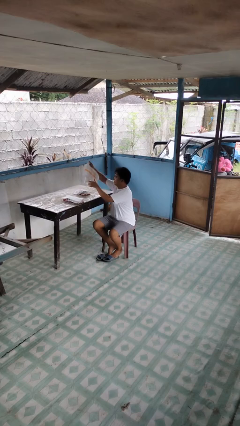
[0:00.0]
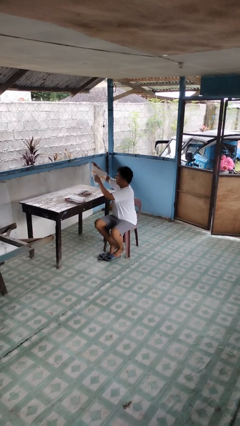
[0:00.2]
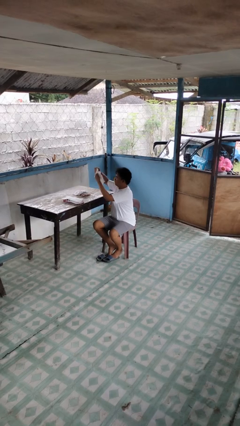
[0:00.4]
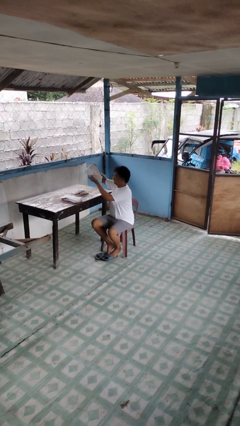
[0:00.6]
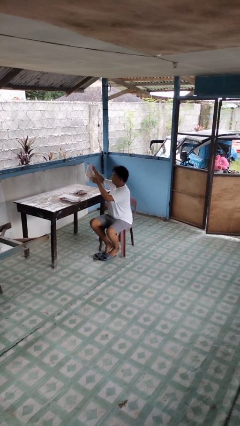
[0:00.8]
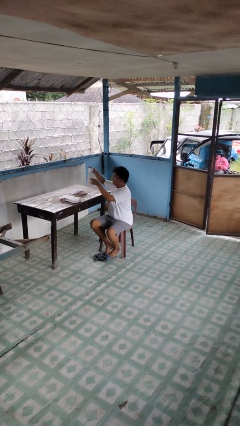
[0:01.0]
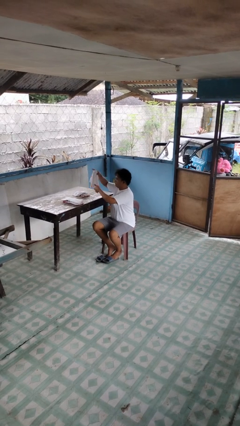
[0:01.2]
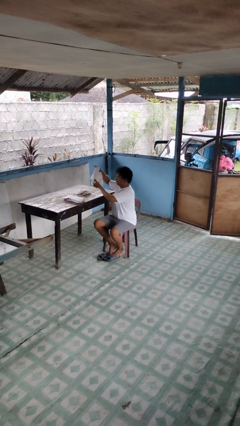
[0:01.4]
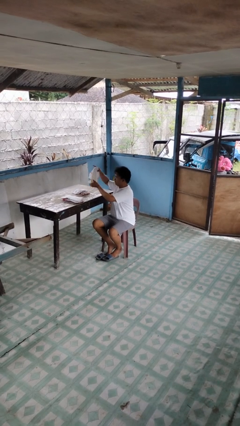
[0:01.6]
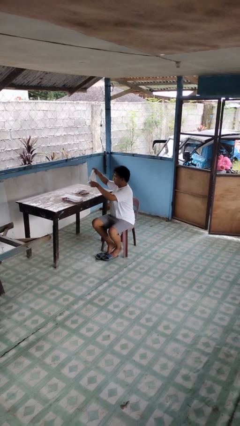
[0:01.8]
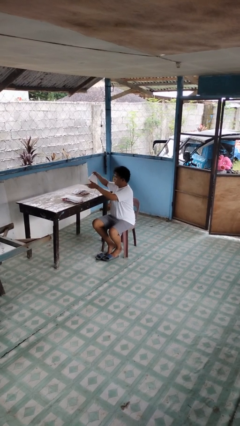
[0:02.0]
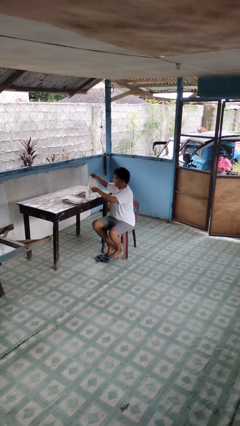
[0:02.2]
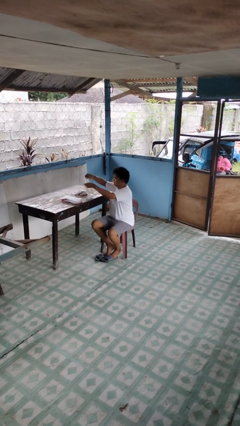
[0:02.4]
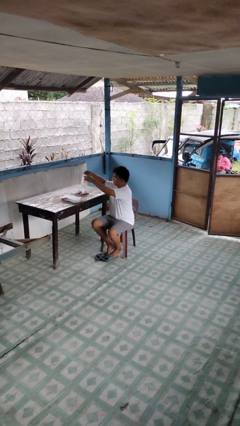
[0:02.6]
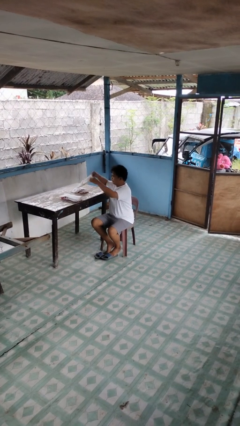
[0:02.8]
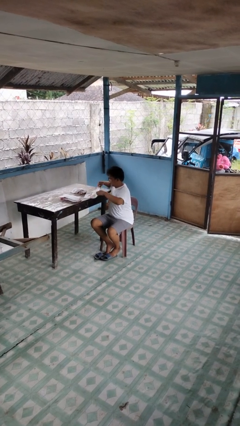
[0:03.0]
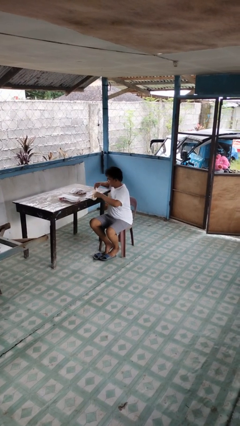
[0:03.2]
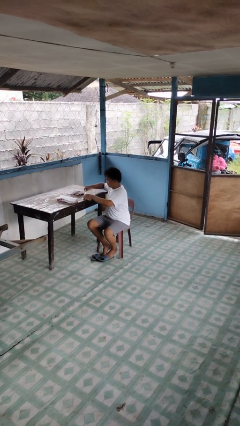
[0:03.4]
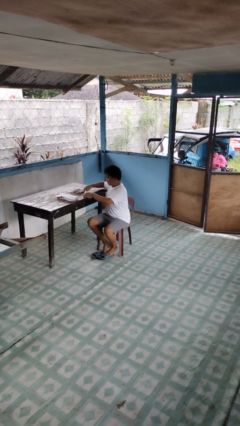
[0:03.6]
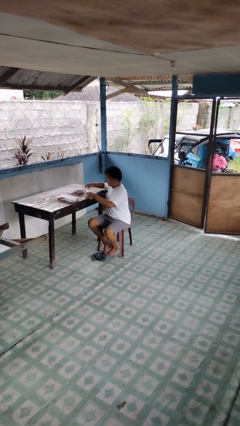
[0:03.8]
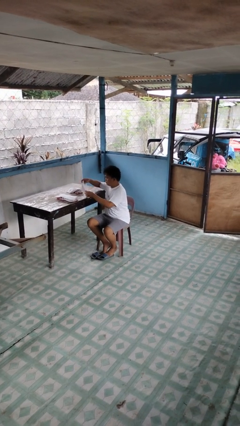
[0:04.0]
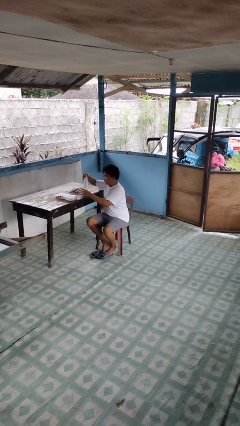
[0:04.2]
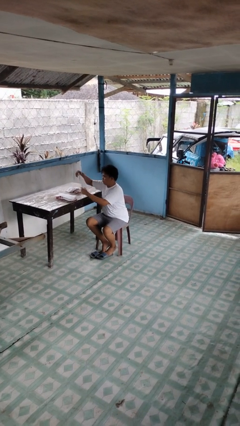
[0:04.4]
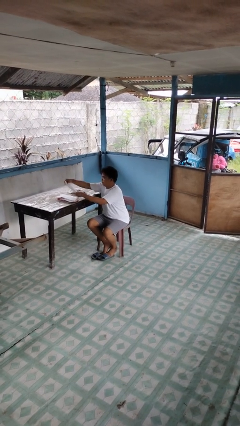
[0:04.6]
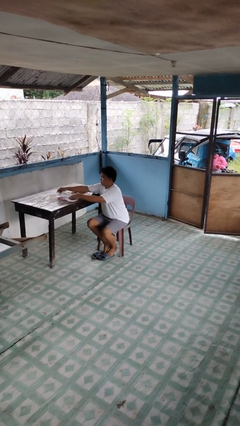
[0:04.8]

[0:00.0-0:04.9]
person folds towel

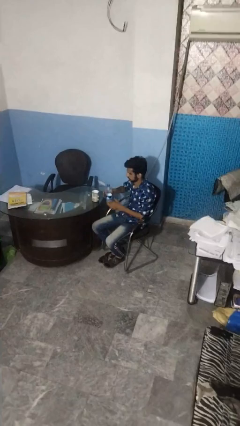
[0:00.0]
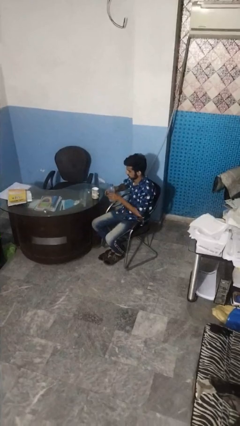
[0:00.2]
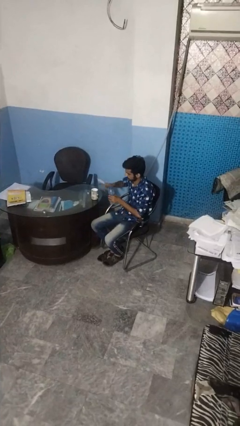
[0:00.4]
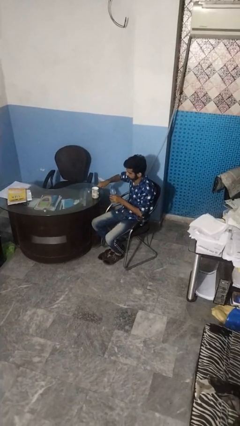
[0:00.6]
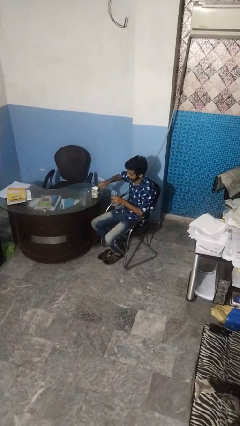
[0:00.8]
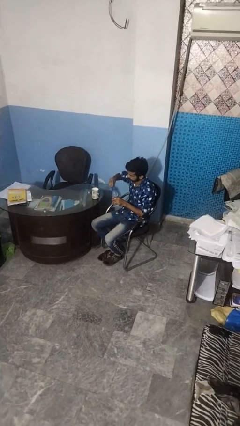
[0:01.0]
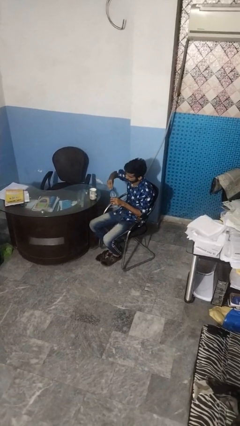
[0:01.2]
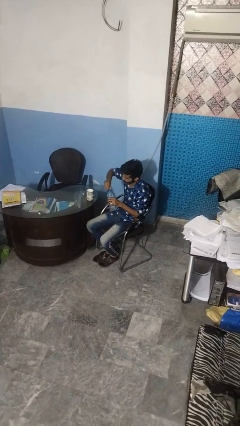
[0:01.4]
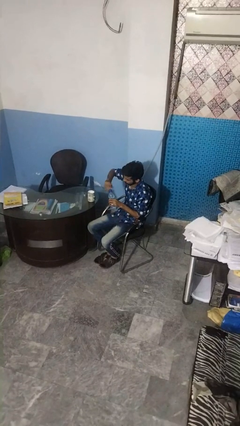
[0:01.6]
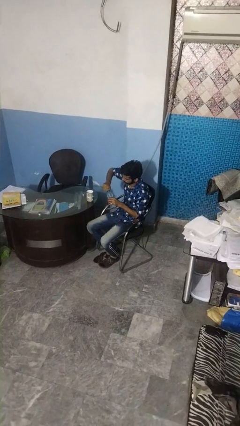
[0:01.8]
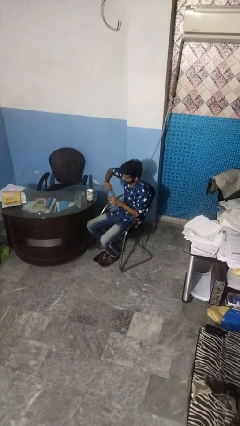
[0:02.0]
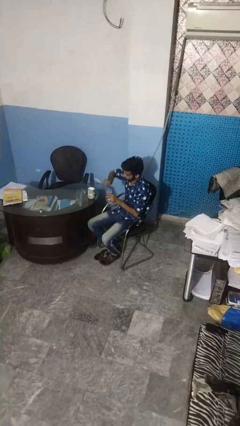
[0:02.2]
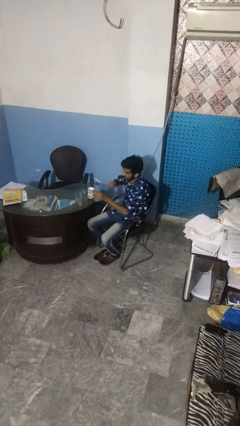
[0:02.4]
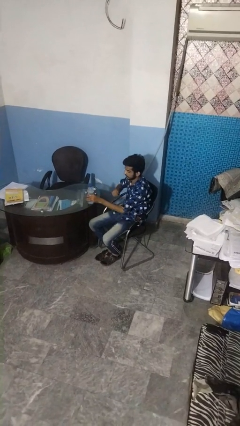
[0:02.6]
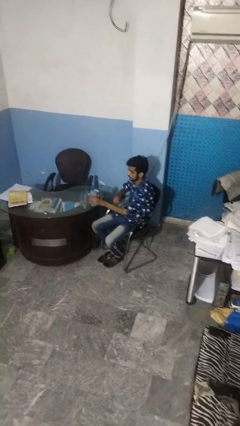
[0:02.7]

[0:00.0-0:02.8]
person screws lid to bottle

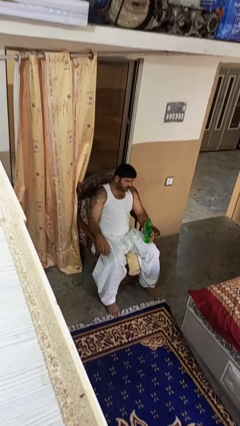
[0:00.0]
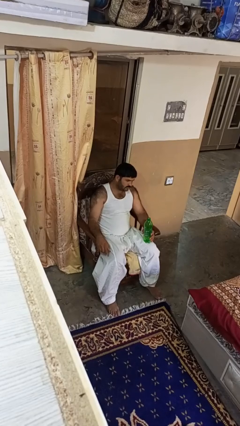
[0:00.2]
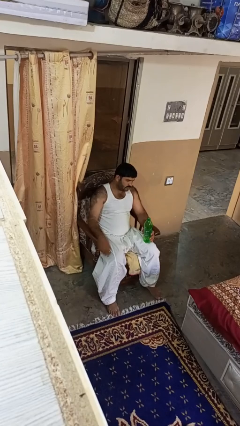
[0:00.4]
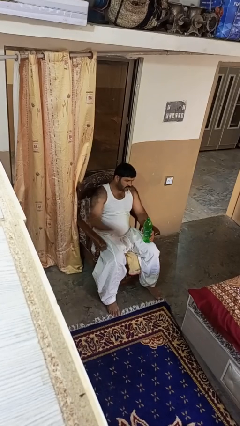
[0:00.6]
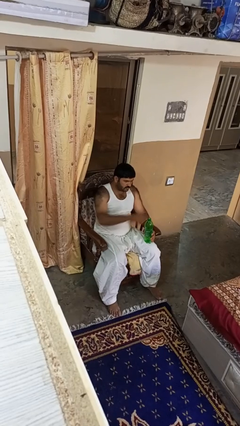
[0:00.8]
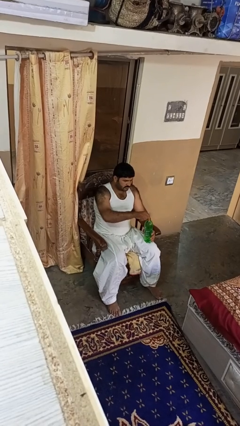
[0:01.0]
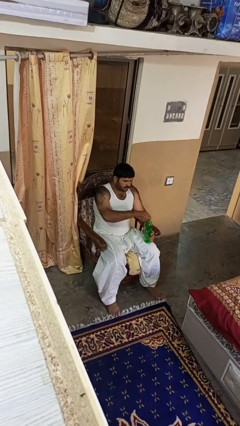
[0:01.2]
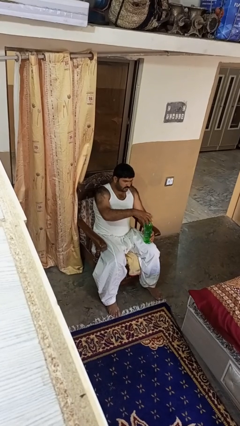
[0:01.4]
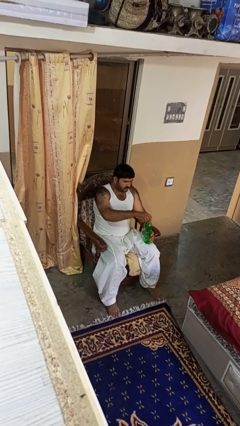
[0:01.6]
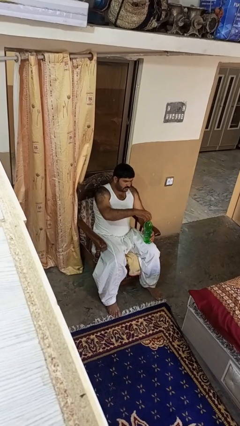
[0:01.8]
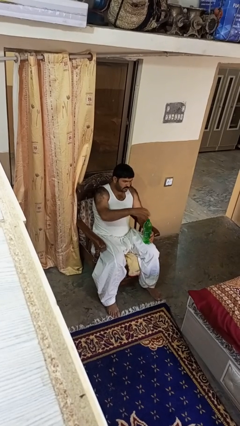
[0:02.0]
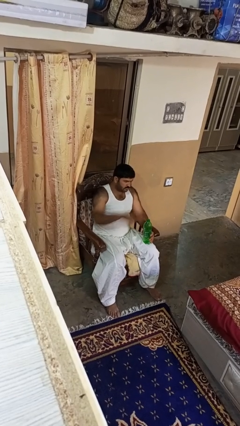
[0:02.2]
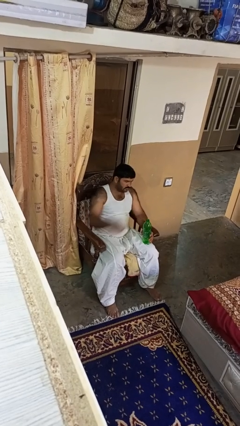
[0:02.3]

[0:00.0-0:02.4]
person unscrews lid from bottle

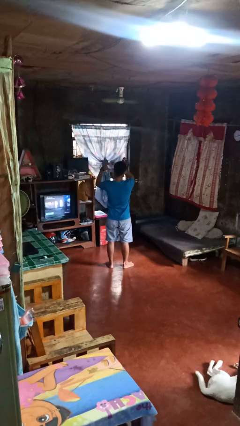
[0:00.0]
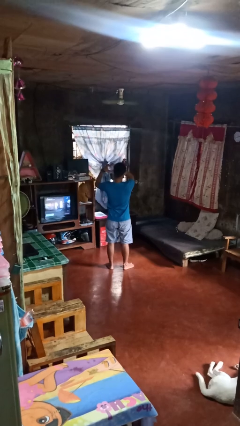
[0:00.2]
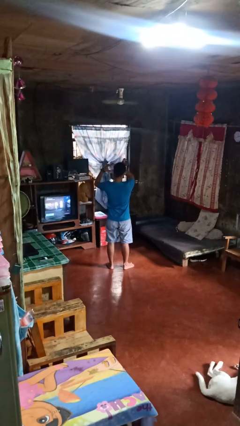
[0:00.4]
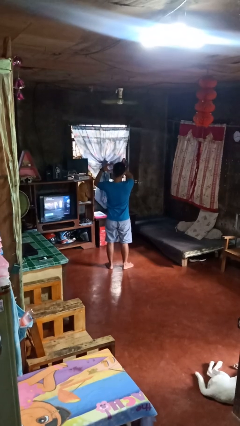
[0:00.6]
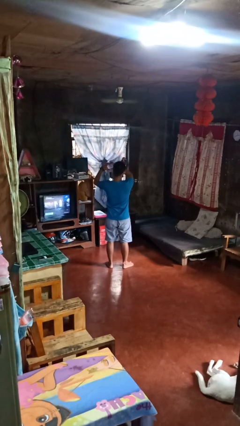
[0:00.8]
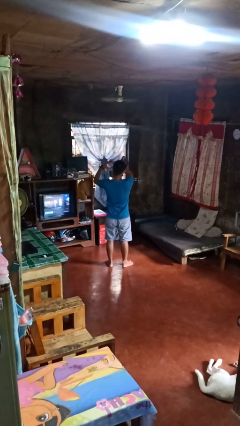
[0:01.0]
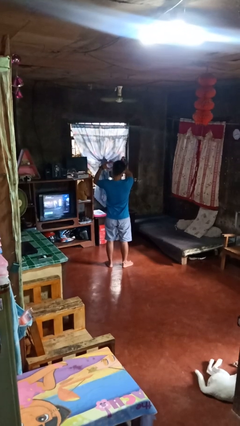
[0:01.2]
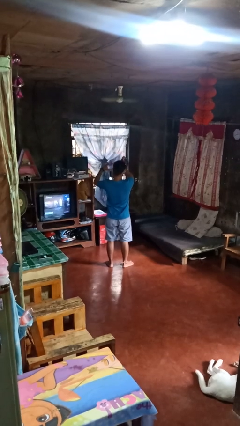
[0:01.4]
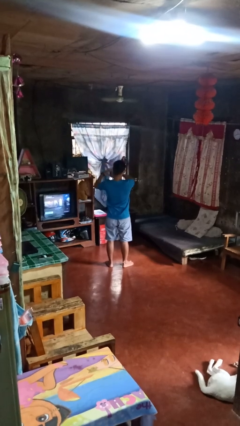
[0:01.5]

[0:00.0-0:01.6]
person gestures heart

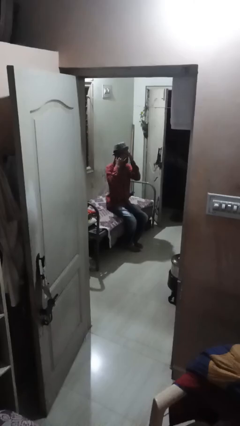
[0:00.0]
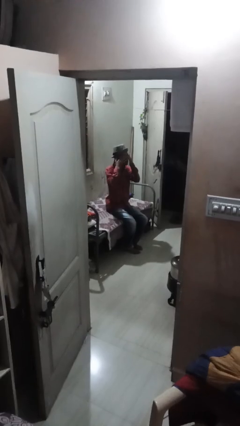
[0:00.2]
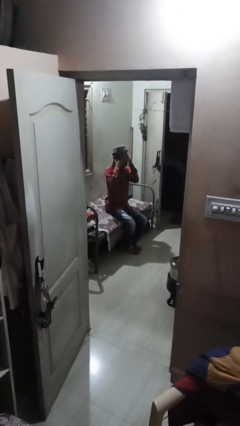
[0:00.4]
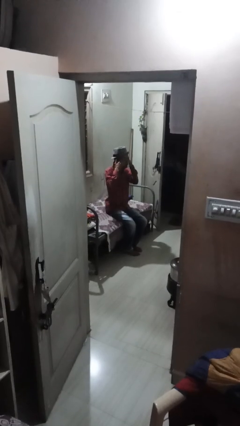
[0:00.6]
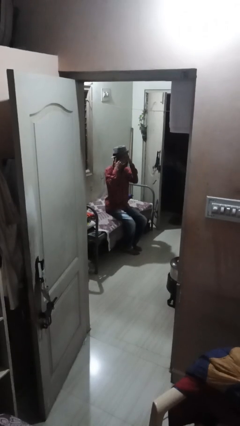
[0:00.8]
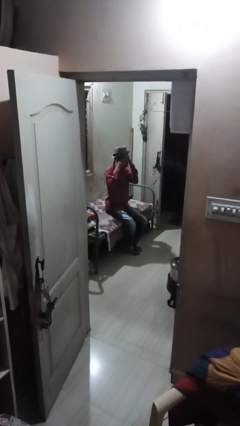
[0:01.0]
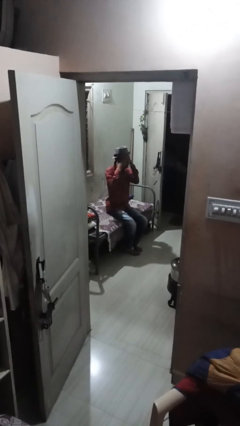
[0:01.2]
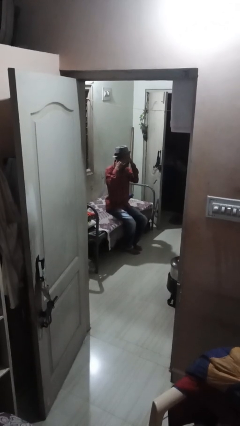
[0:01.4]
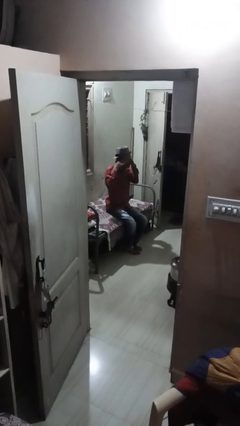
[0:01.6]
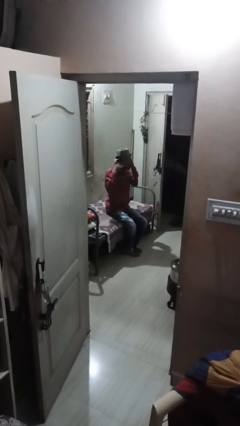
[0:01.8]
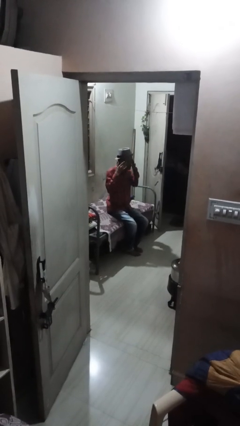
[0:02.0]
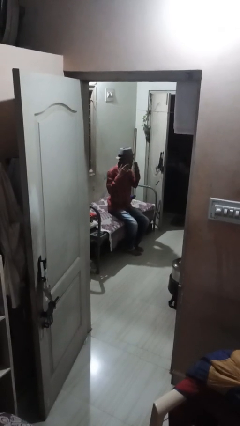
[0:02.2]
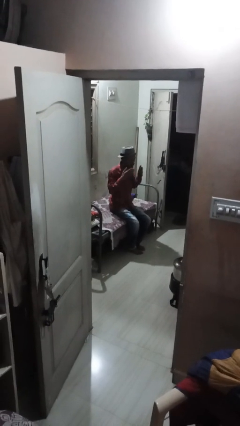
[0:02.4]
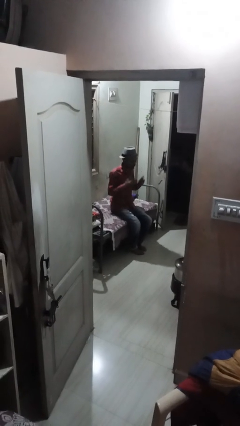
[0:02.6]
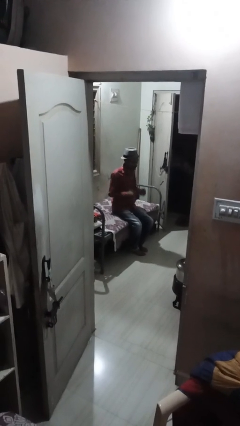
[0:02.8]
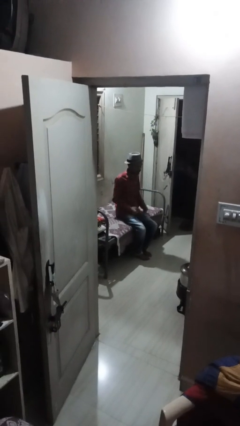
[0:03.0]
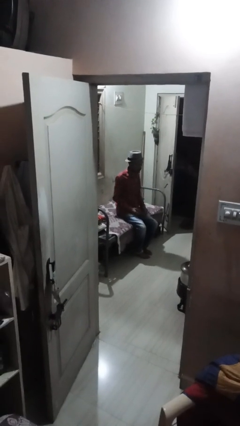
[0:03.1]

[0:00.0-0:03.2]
person rubs eyes

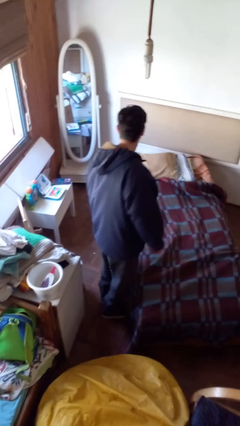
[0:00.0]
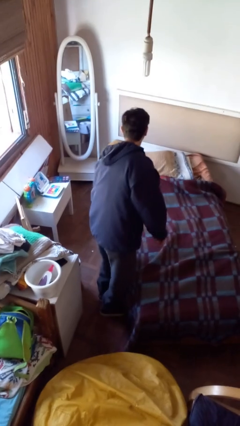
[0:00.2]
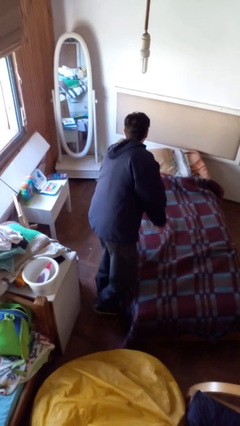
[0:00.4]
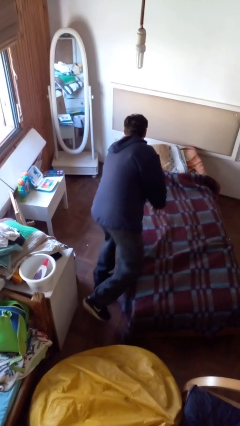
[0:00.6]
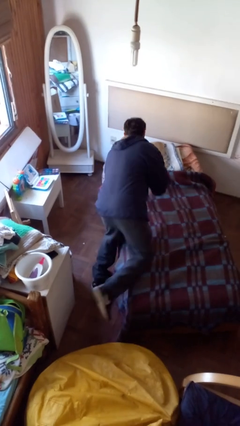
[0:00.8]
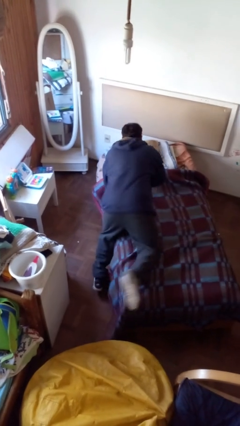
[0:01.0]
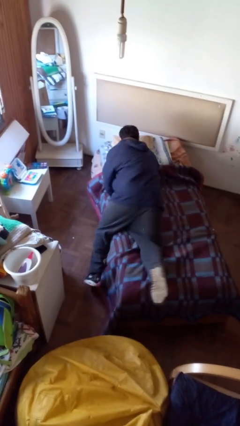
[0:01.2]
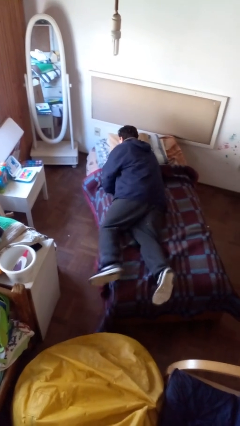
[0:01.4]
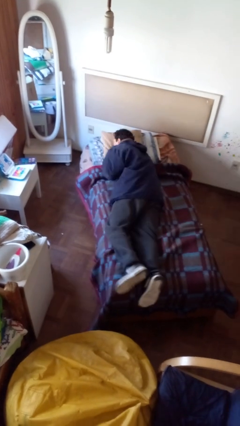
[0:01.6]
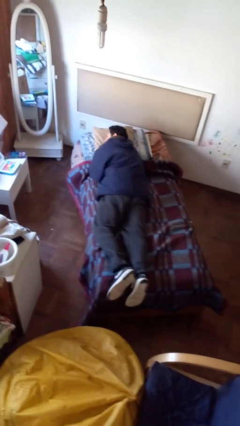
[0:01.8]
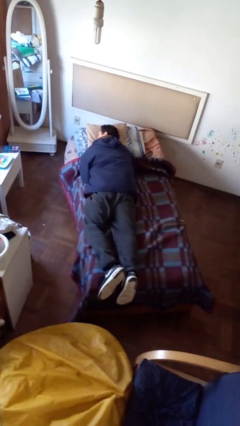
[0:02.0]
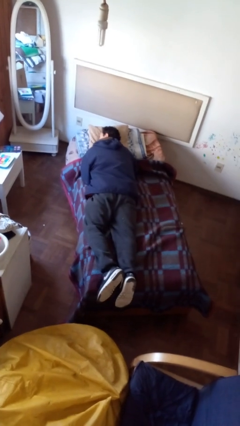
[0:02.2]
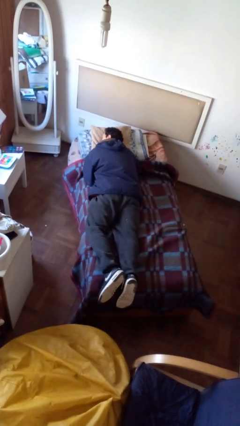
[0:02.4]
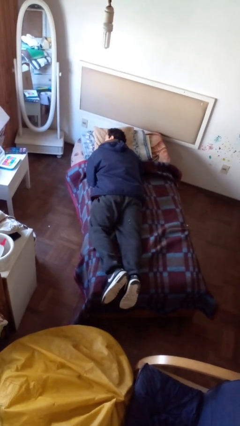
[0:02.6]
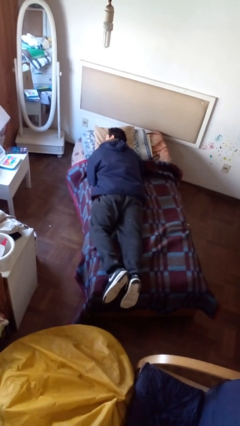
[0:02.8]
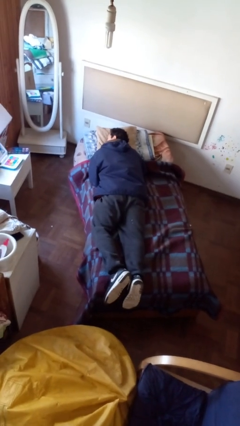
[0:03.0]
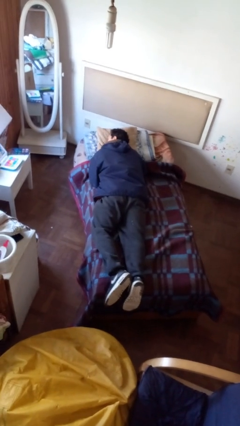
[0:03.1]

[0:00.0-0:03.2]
person lies down on bed
